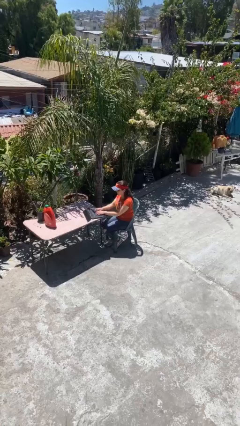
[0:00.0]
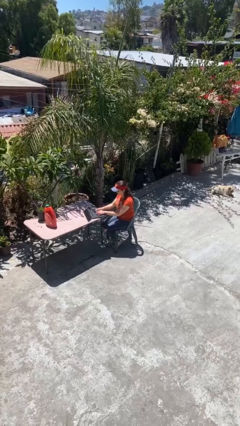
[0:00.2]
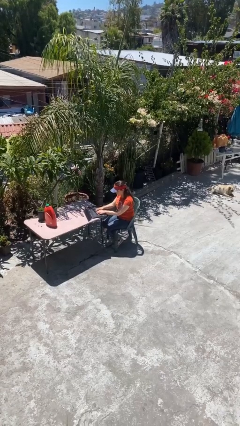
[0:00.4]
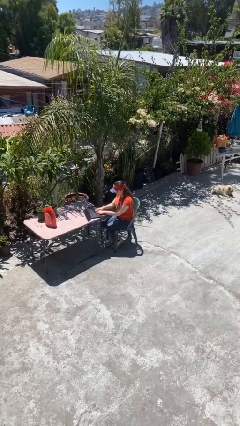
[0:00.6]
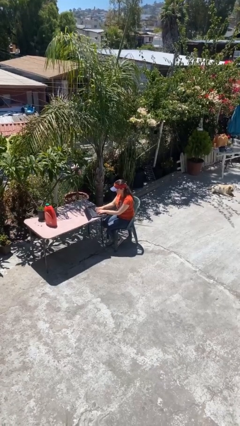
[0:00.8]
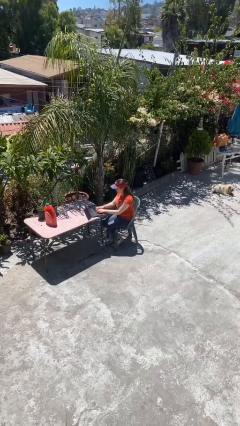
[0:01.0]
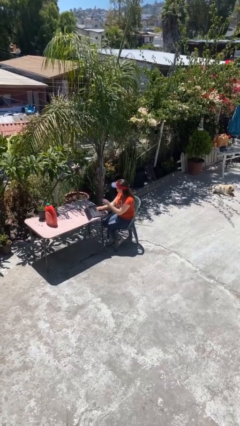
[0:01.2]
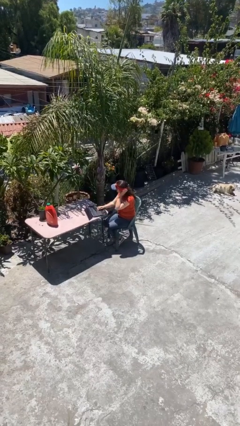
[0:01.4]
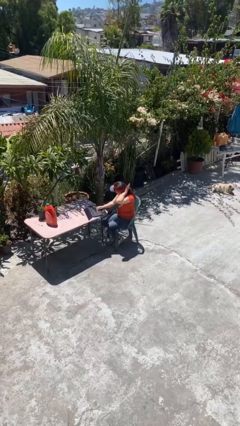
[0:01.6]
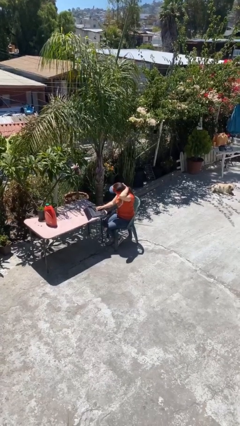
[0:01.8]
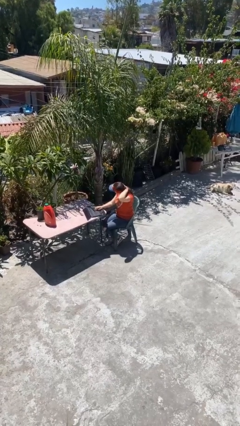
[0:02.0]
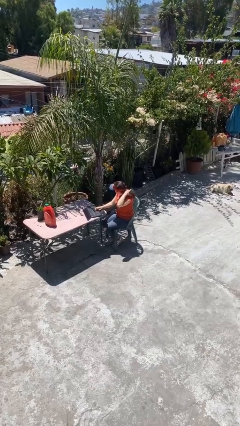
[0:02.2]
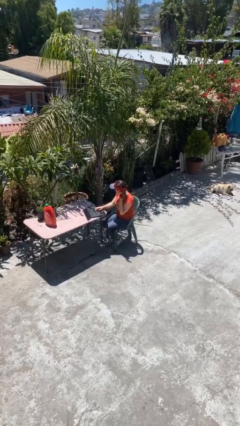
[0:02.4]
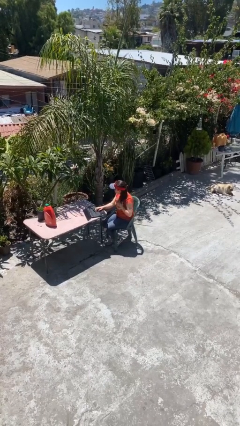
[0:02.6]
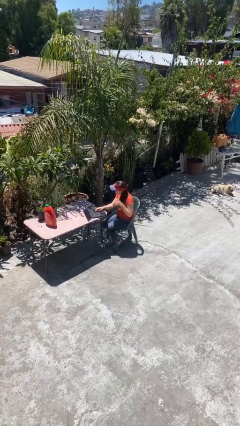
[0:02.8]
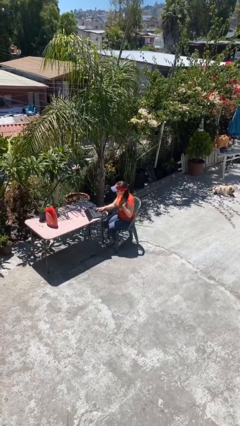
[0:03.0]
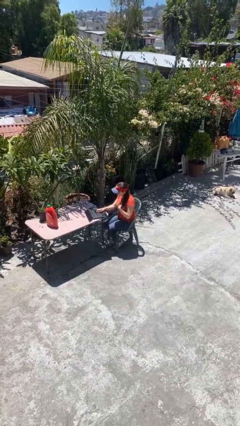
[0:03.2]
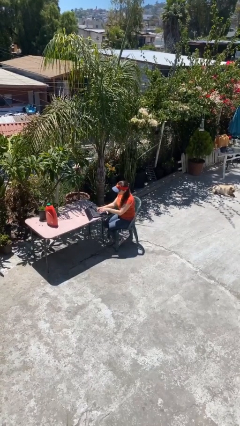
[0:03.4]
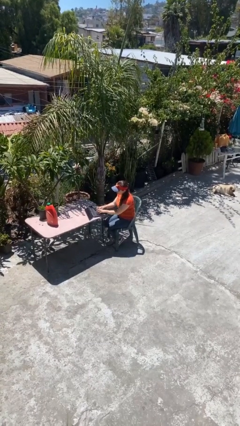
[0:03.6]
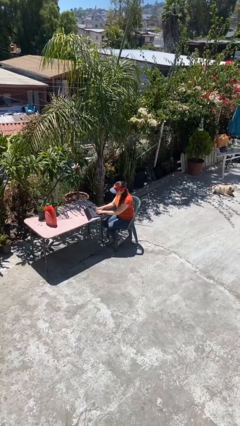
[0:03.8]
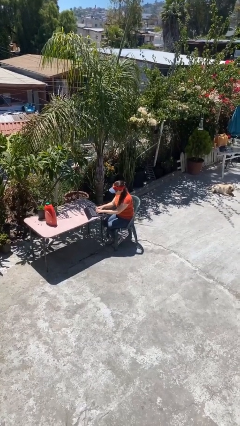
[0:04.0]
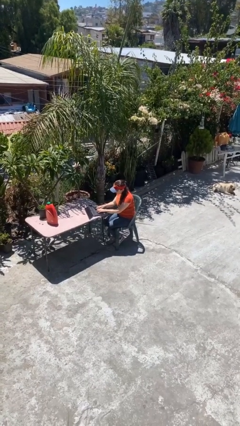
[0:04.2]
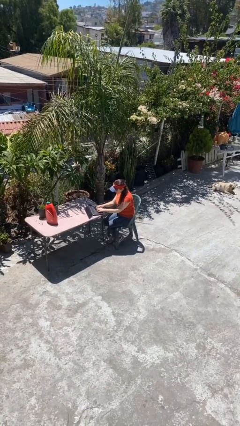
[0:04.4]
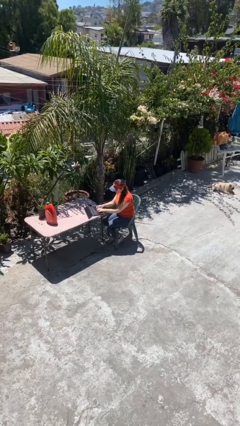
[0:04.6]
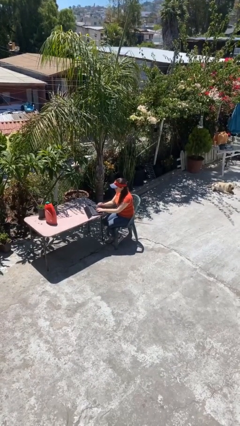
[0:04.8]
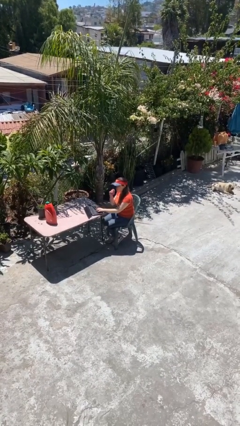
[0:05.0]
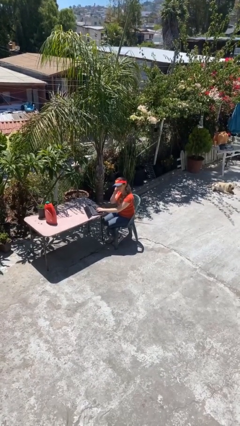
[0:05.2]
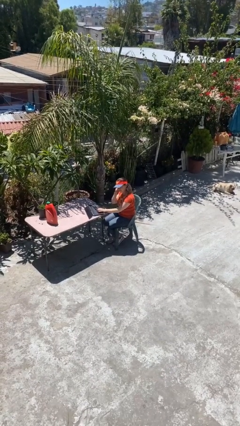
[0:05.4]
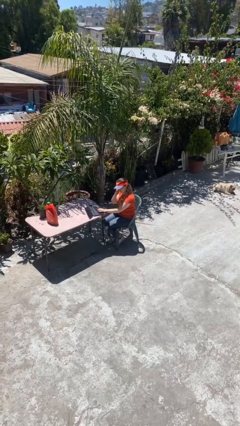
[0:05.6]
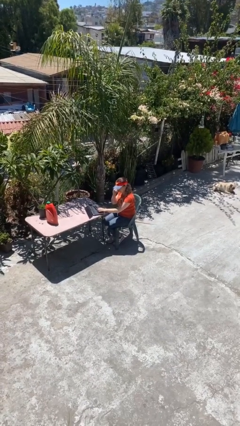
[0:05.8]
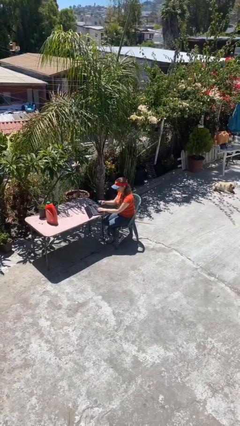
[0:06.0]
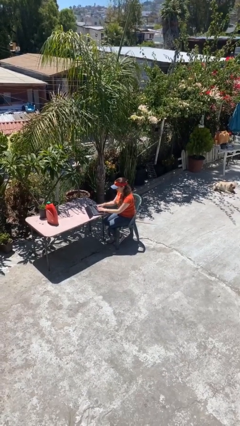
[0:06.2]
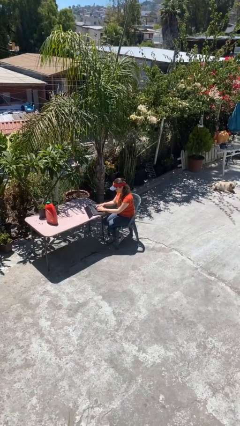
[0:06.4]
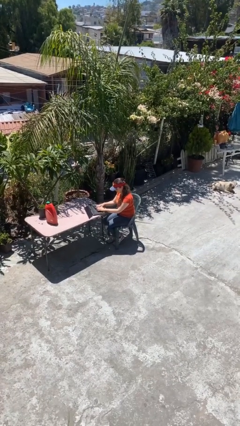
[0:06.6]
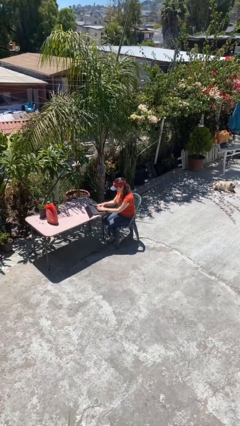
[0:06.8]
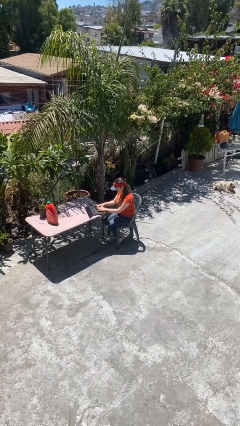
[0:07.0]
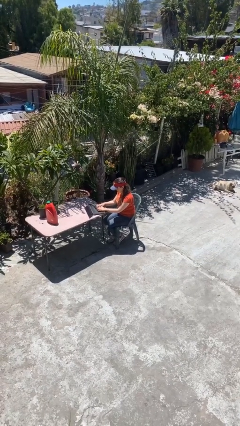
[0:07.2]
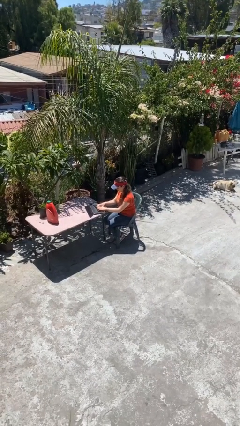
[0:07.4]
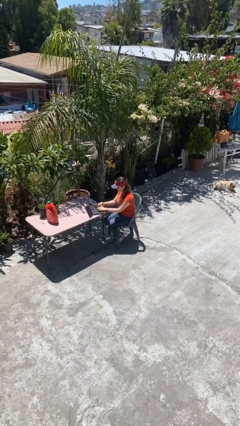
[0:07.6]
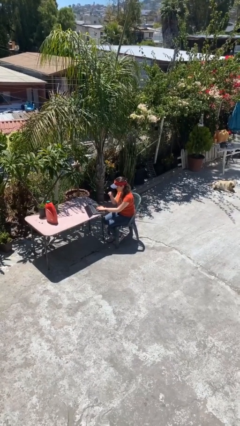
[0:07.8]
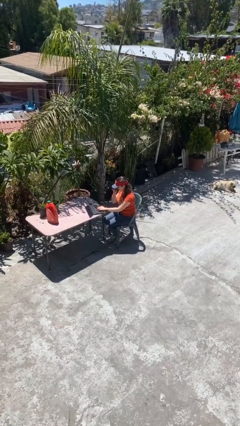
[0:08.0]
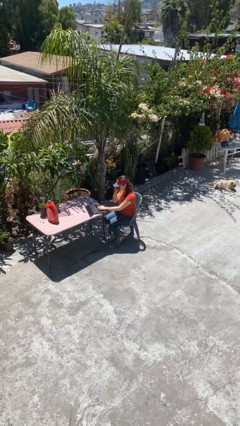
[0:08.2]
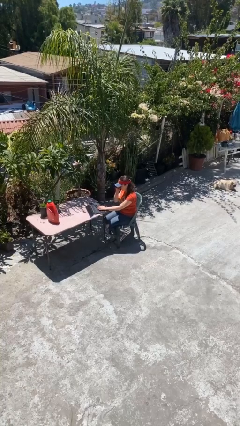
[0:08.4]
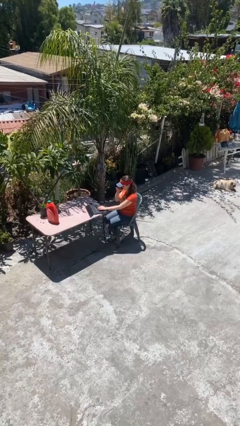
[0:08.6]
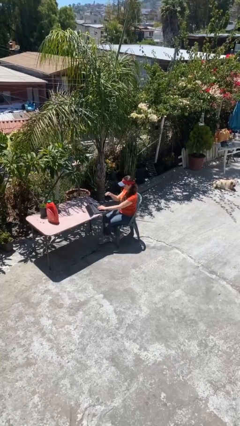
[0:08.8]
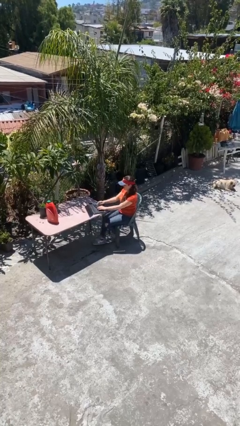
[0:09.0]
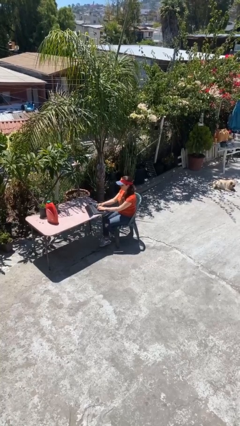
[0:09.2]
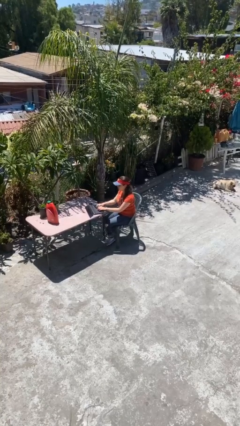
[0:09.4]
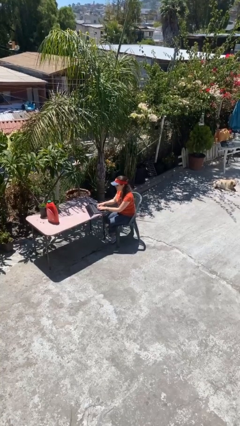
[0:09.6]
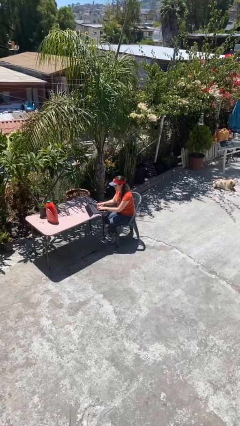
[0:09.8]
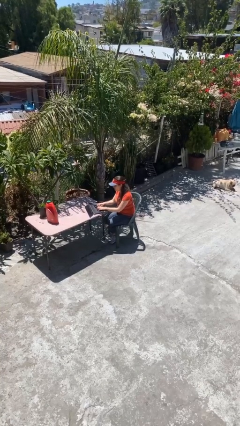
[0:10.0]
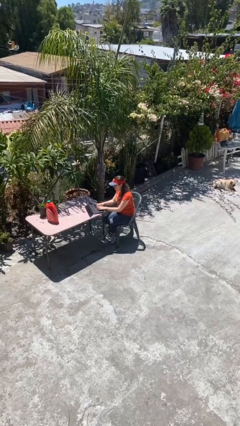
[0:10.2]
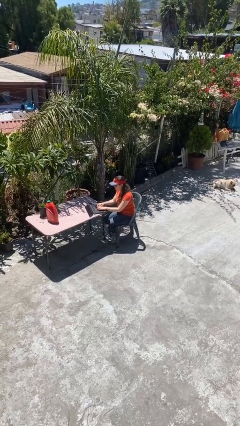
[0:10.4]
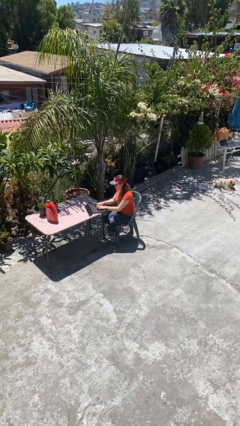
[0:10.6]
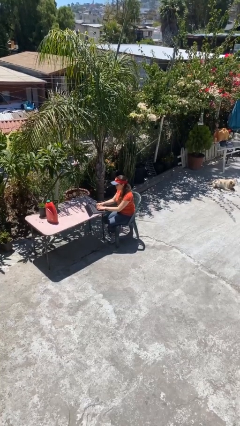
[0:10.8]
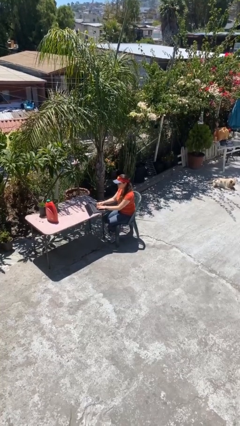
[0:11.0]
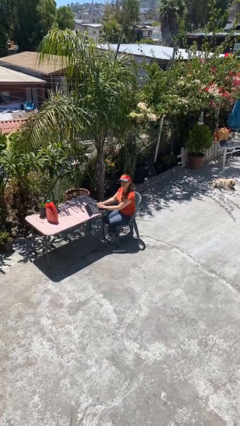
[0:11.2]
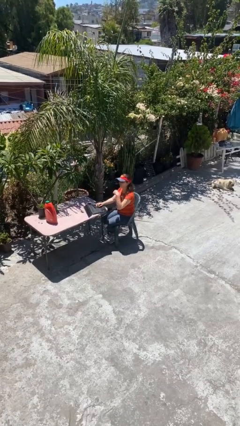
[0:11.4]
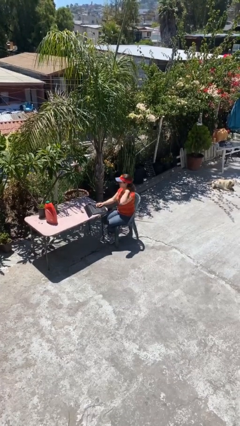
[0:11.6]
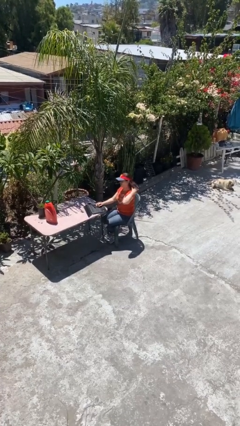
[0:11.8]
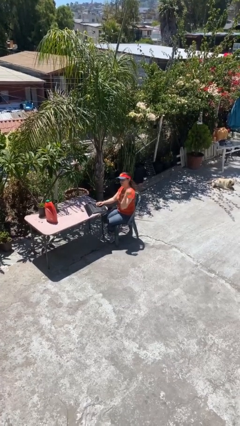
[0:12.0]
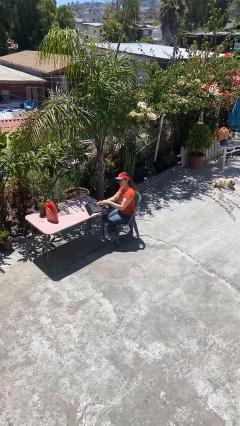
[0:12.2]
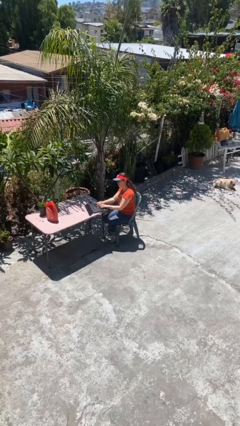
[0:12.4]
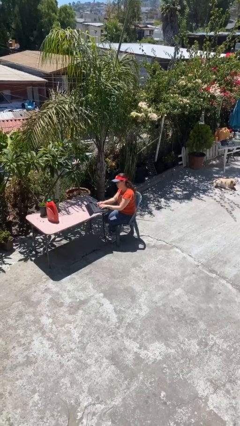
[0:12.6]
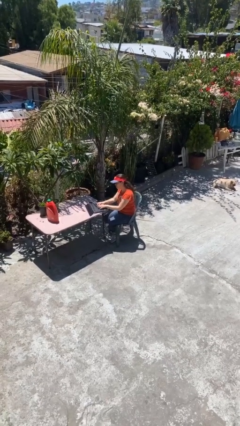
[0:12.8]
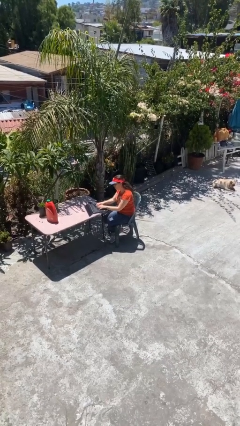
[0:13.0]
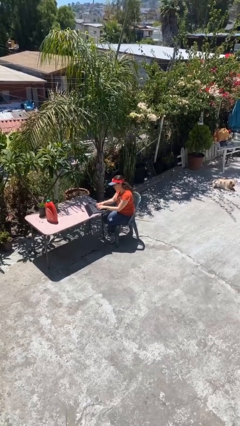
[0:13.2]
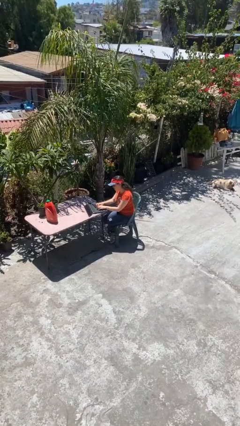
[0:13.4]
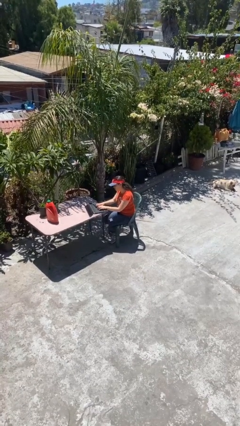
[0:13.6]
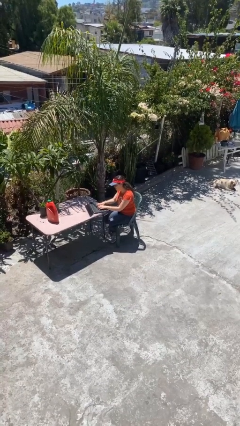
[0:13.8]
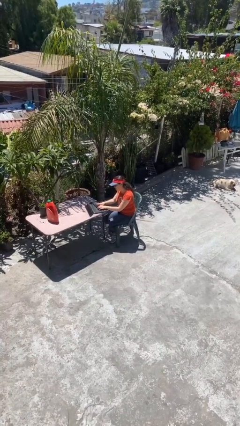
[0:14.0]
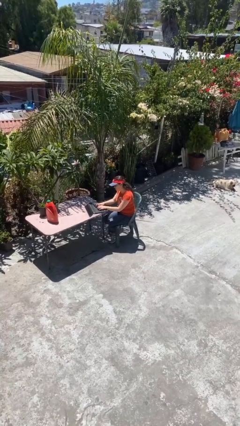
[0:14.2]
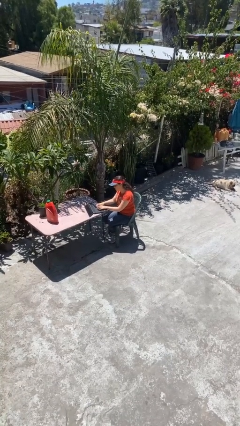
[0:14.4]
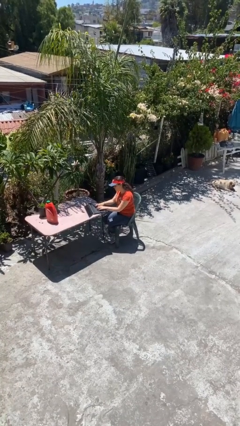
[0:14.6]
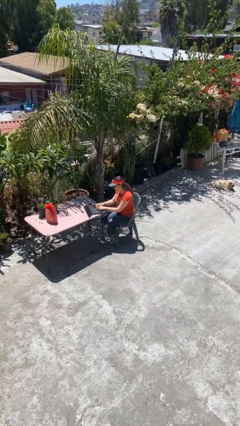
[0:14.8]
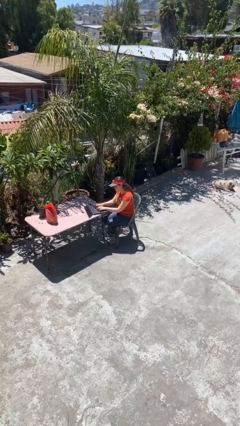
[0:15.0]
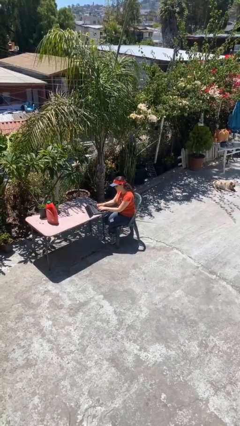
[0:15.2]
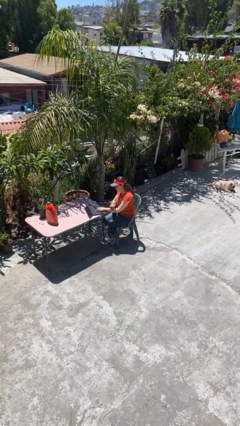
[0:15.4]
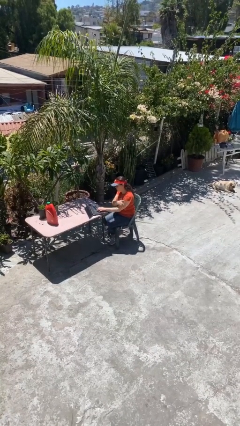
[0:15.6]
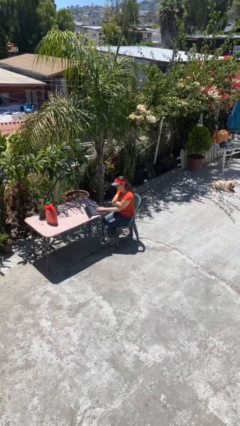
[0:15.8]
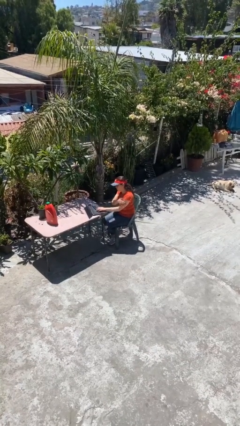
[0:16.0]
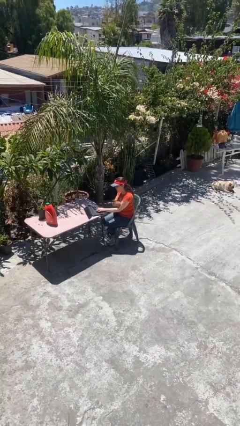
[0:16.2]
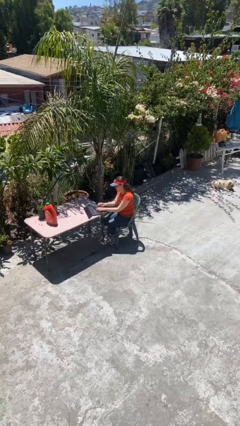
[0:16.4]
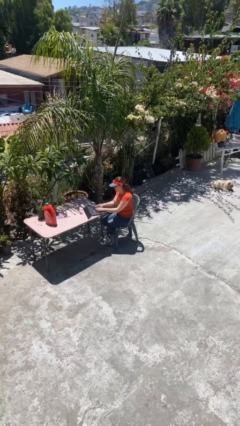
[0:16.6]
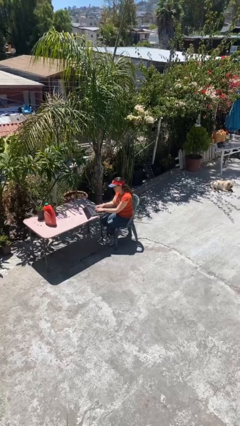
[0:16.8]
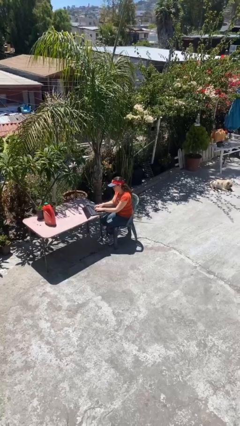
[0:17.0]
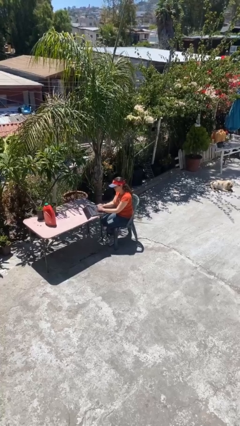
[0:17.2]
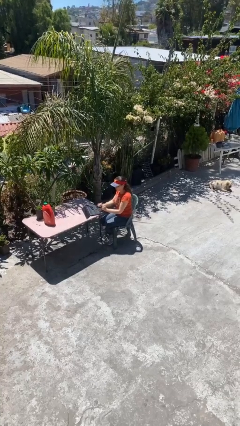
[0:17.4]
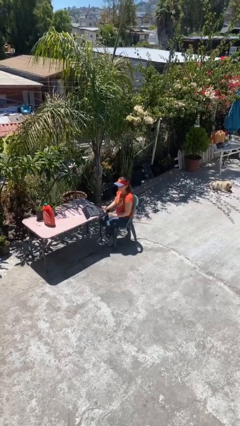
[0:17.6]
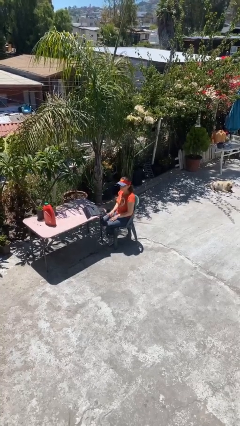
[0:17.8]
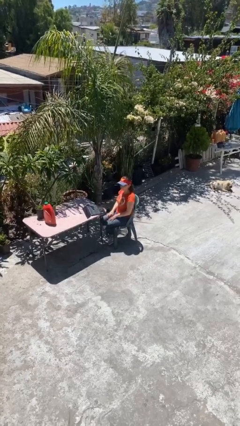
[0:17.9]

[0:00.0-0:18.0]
person interacts with laptop
